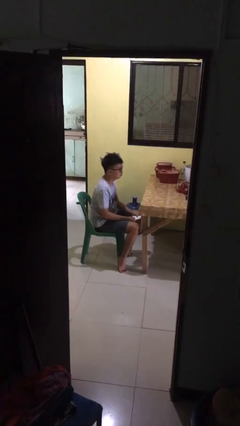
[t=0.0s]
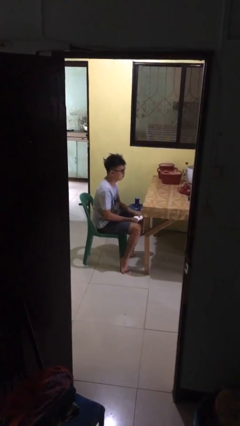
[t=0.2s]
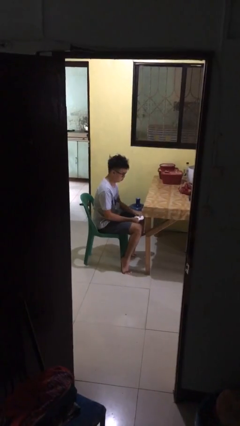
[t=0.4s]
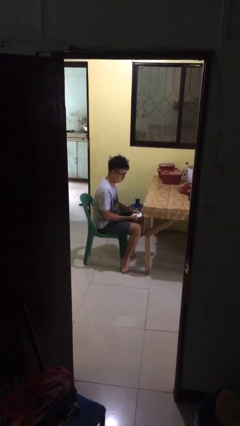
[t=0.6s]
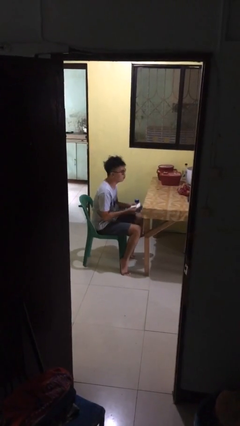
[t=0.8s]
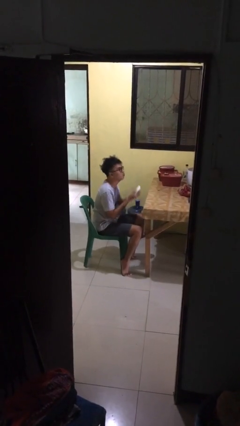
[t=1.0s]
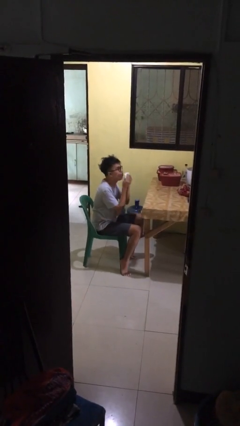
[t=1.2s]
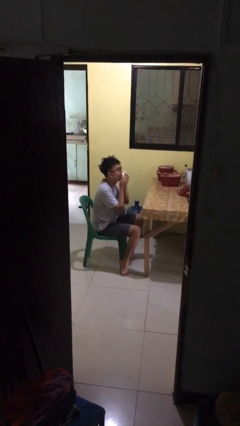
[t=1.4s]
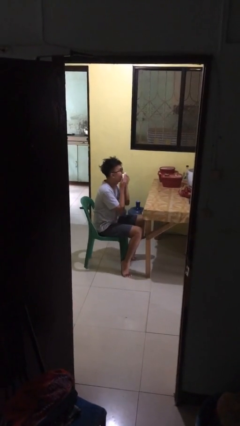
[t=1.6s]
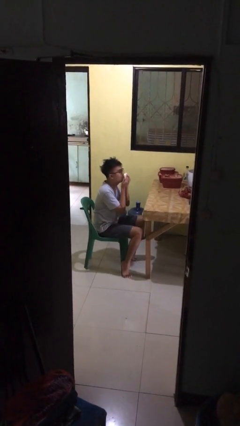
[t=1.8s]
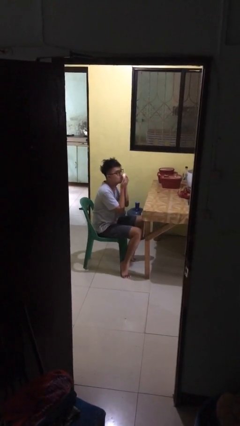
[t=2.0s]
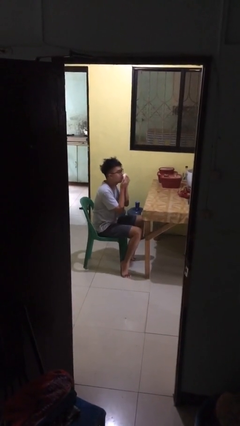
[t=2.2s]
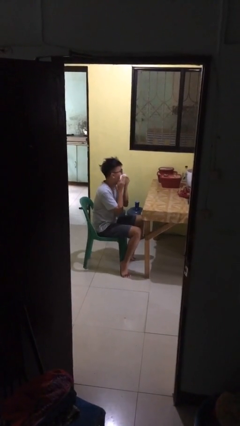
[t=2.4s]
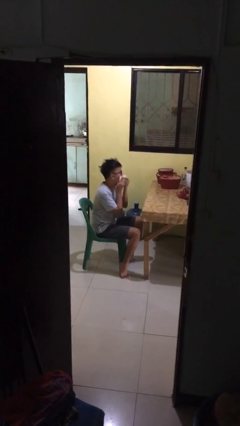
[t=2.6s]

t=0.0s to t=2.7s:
person wipes mouth with napkin

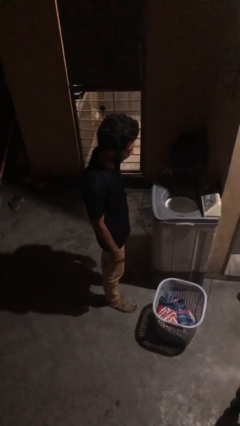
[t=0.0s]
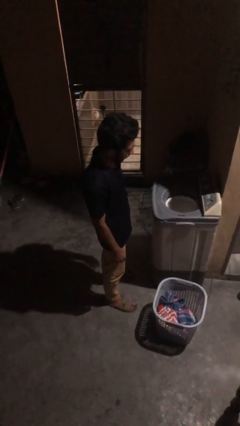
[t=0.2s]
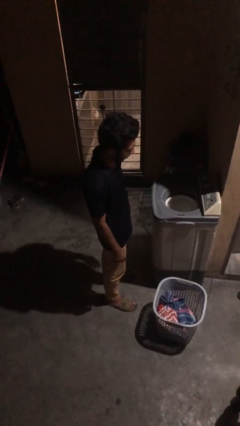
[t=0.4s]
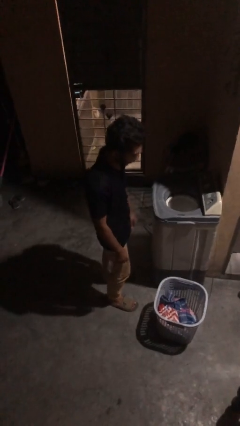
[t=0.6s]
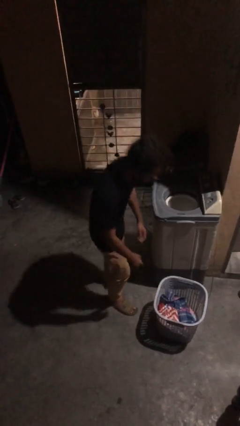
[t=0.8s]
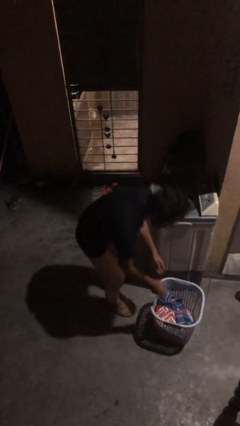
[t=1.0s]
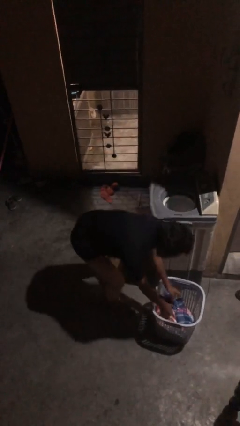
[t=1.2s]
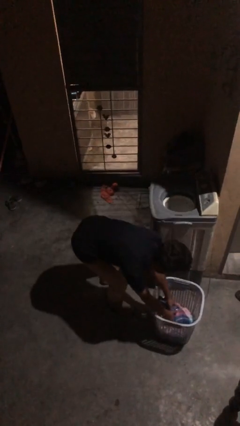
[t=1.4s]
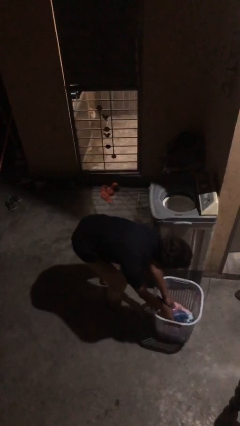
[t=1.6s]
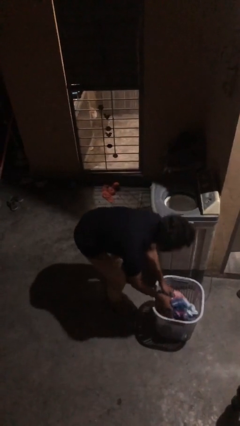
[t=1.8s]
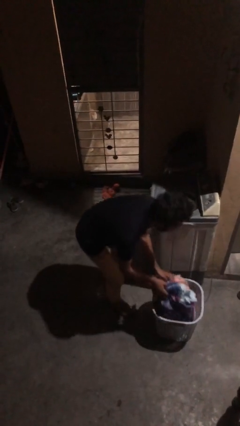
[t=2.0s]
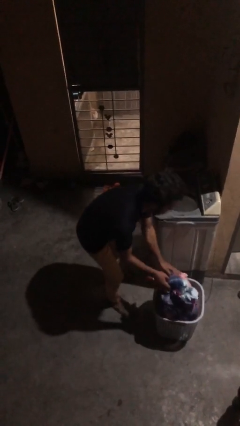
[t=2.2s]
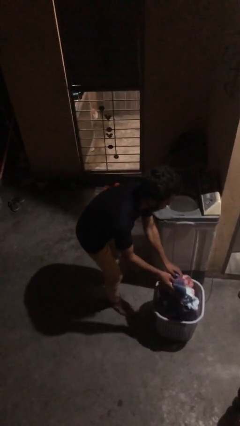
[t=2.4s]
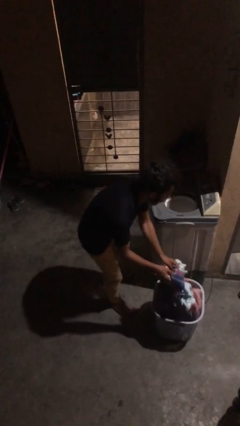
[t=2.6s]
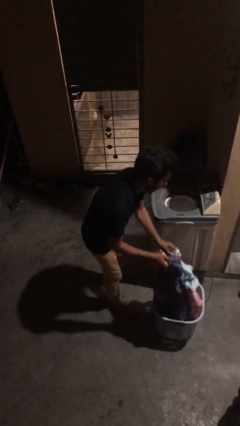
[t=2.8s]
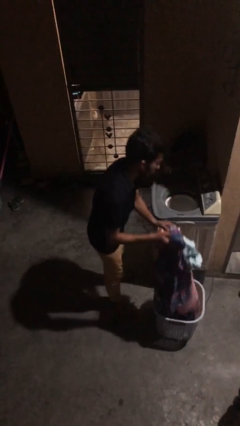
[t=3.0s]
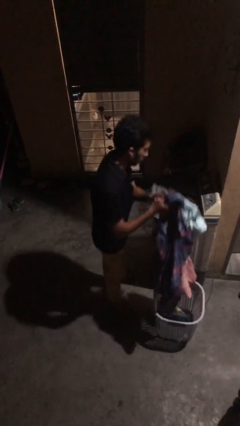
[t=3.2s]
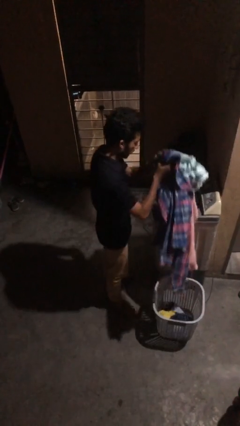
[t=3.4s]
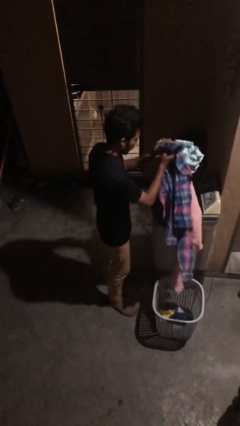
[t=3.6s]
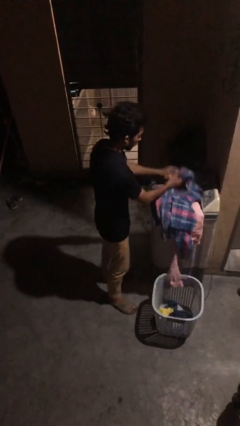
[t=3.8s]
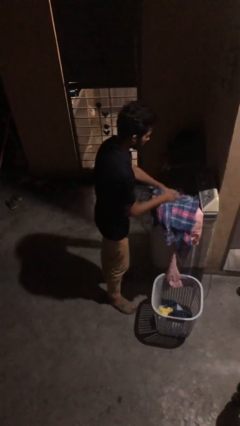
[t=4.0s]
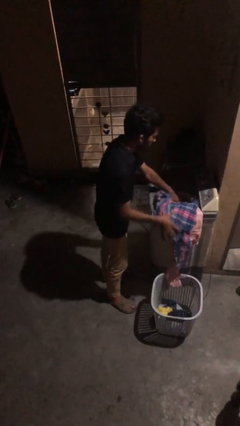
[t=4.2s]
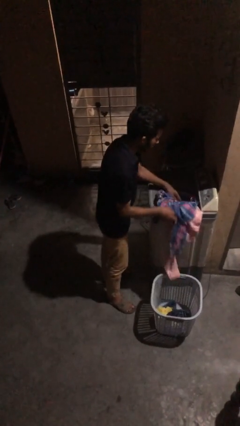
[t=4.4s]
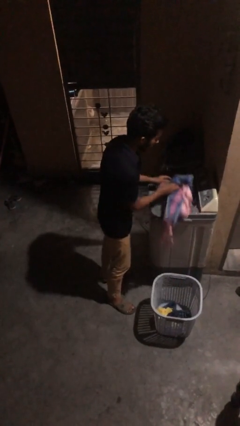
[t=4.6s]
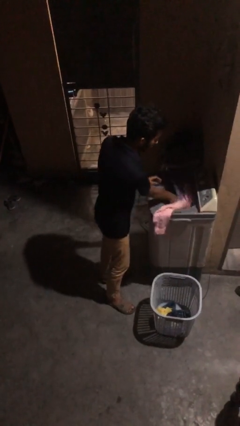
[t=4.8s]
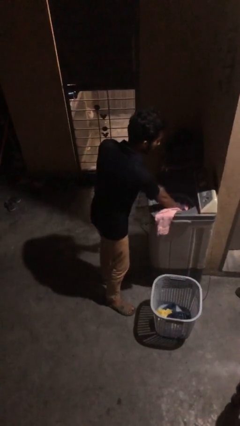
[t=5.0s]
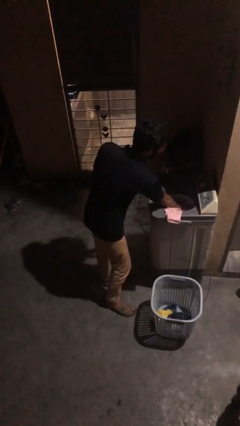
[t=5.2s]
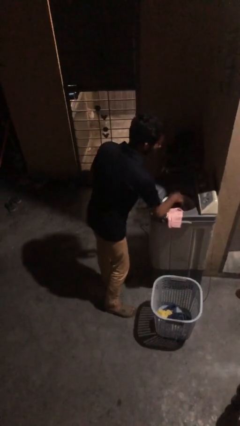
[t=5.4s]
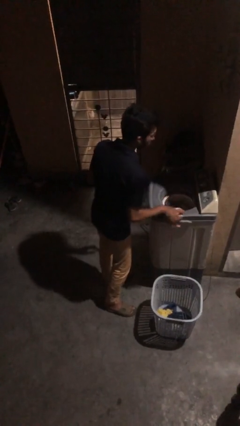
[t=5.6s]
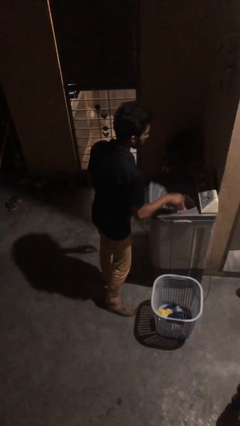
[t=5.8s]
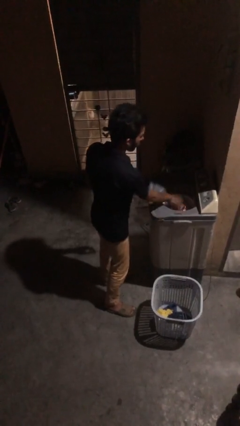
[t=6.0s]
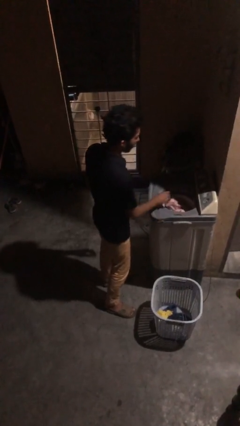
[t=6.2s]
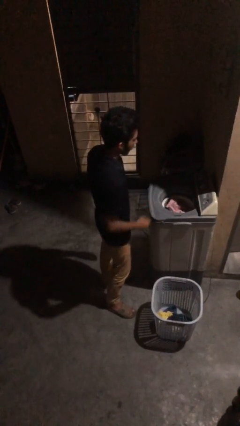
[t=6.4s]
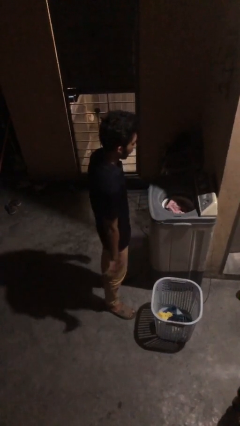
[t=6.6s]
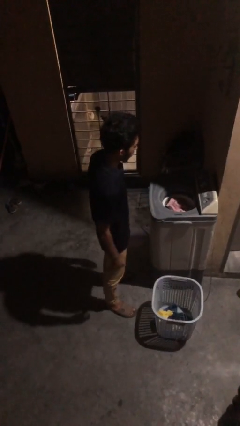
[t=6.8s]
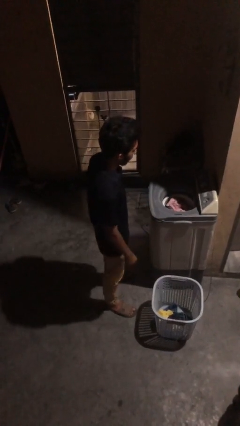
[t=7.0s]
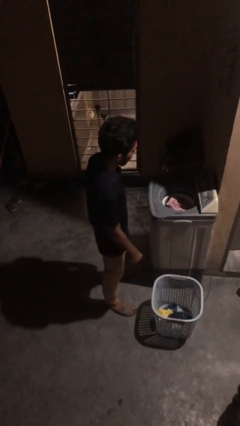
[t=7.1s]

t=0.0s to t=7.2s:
person loads dryer

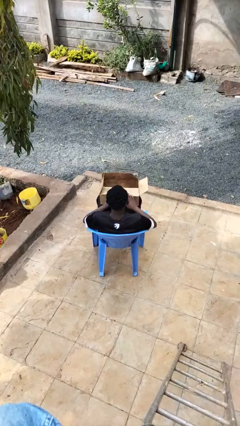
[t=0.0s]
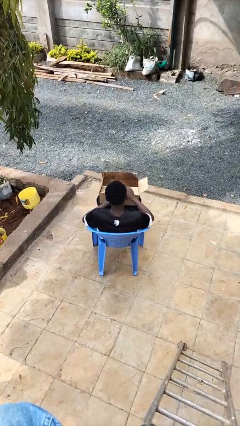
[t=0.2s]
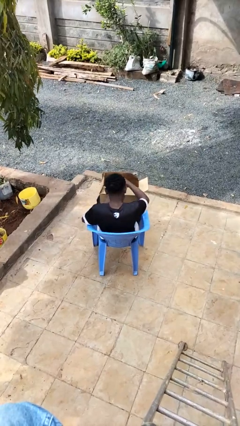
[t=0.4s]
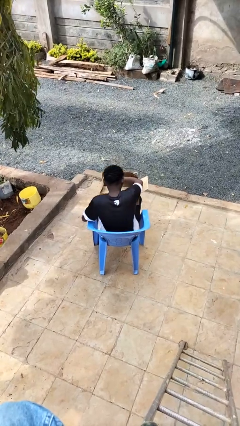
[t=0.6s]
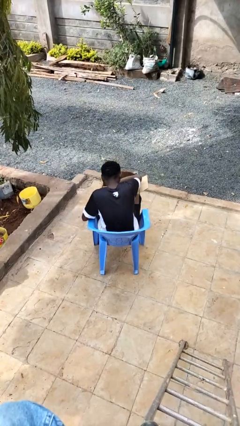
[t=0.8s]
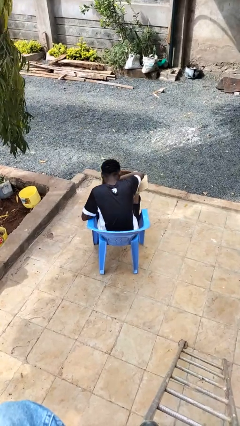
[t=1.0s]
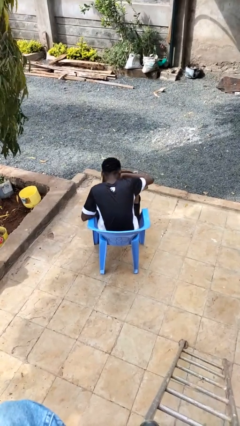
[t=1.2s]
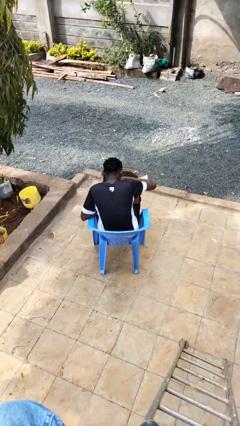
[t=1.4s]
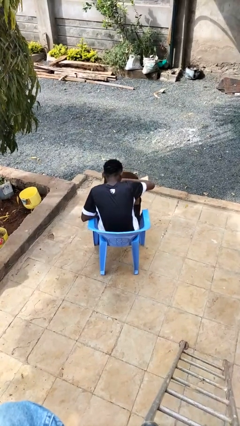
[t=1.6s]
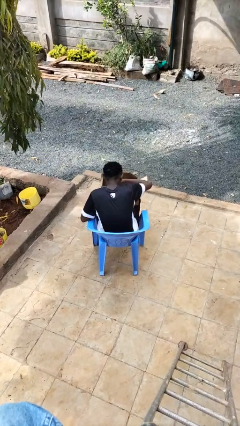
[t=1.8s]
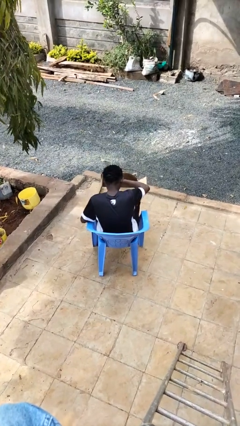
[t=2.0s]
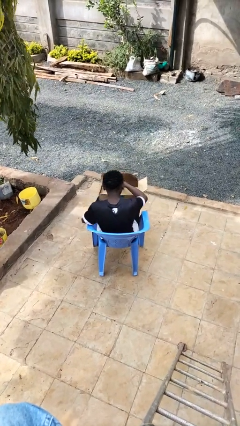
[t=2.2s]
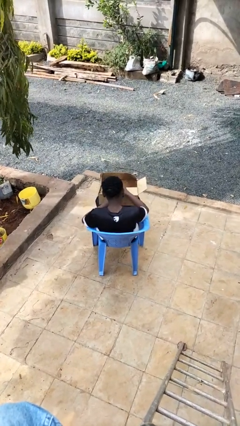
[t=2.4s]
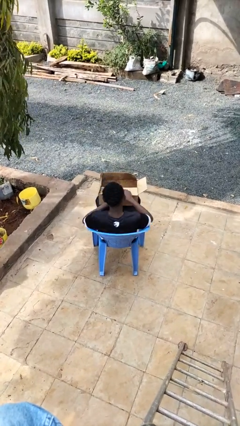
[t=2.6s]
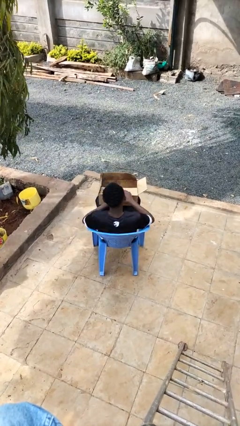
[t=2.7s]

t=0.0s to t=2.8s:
person searches in box

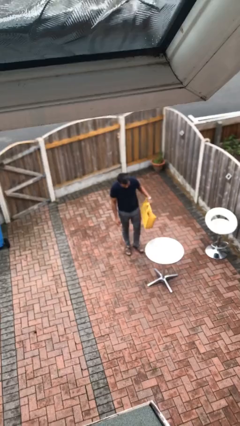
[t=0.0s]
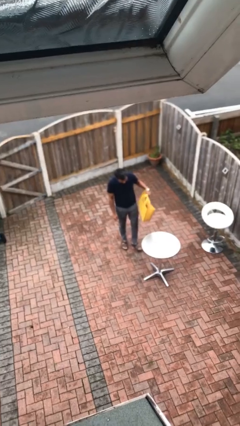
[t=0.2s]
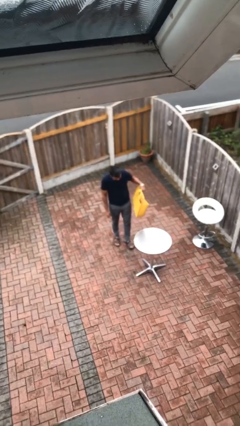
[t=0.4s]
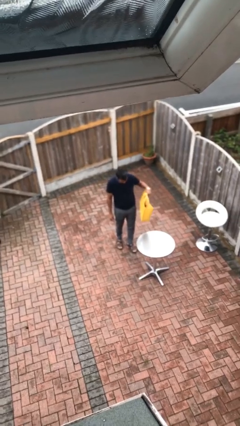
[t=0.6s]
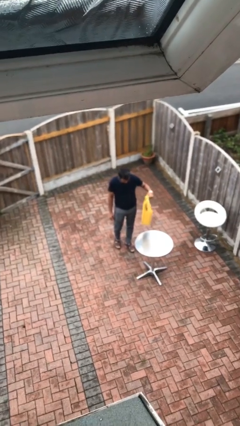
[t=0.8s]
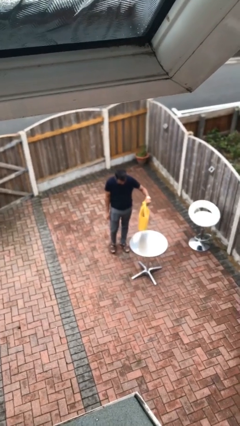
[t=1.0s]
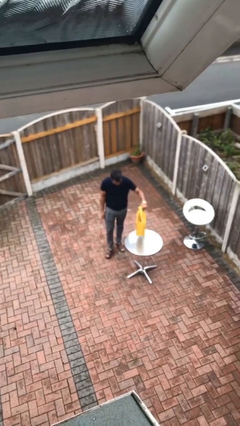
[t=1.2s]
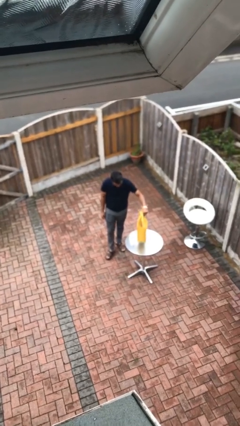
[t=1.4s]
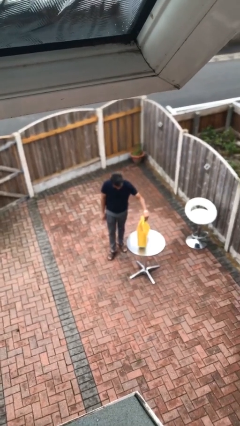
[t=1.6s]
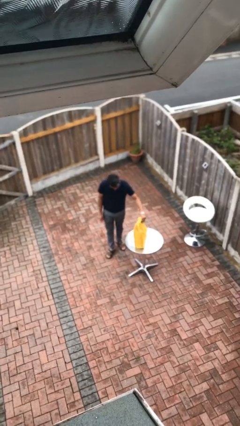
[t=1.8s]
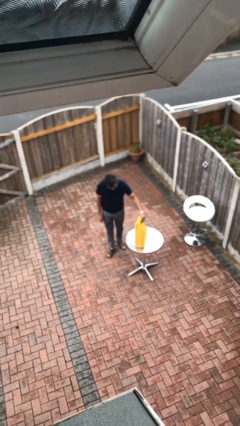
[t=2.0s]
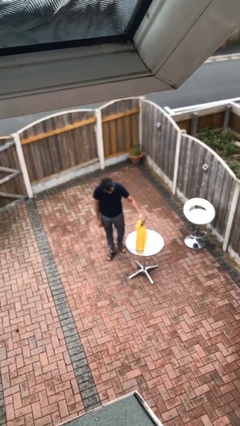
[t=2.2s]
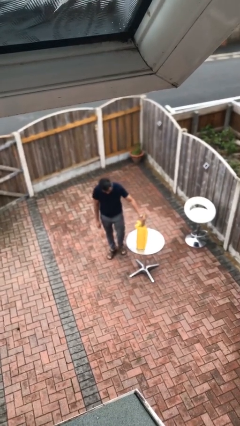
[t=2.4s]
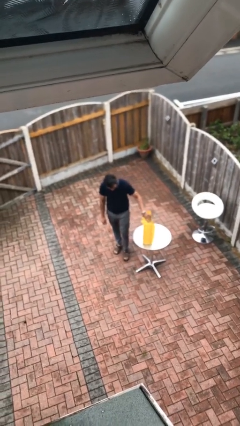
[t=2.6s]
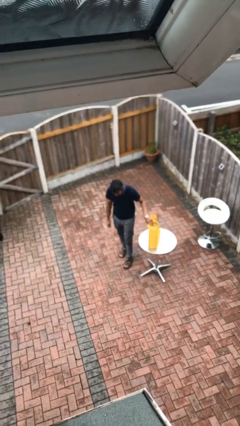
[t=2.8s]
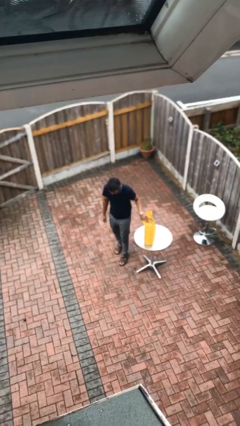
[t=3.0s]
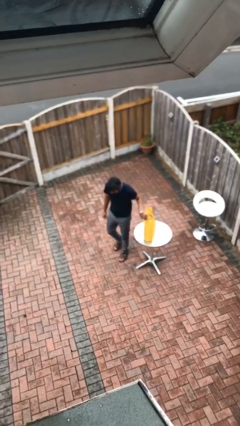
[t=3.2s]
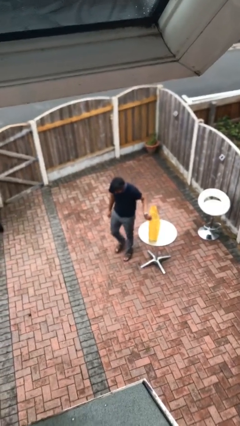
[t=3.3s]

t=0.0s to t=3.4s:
person puts down object on table

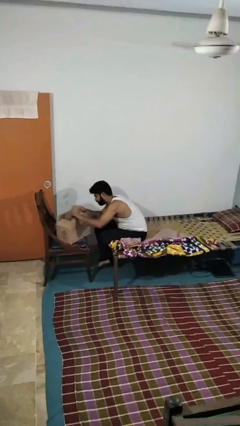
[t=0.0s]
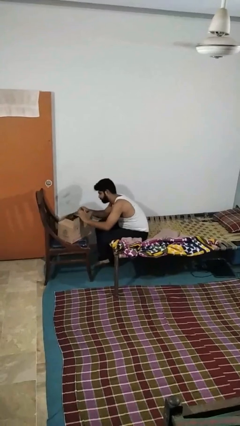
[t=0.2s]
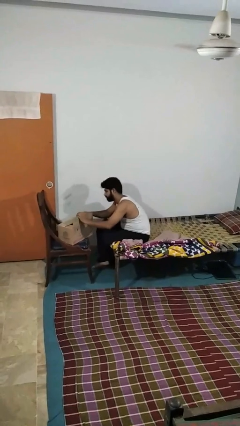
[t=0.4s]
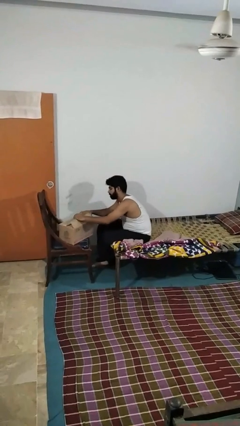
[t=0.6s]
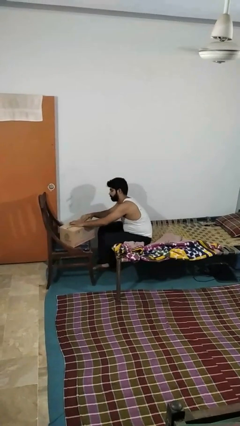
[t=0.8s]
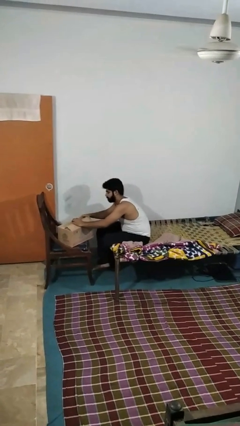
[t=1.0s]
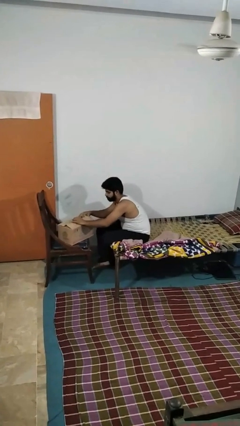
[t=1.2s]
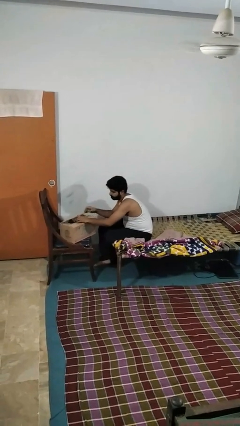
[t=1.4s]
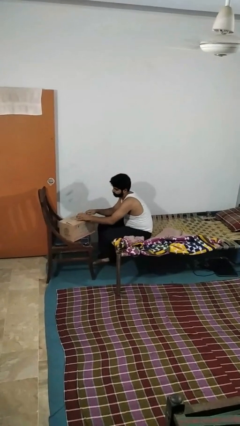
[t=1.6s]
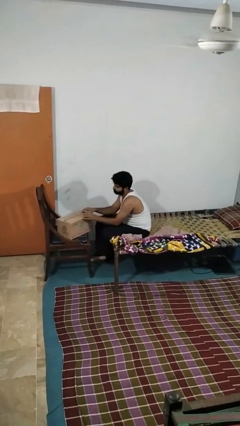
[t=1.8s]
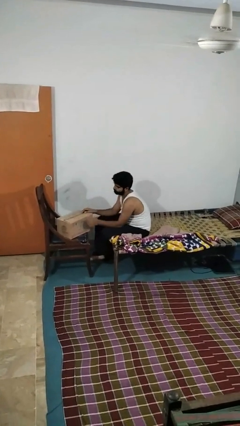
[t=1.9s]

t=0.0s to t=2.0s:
person closes box
